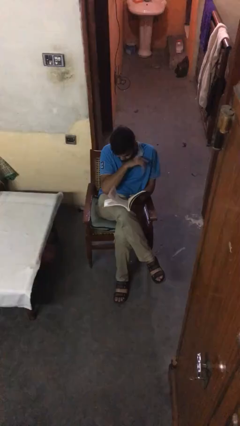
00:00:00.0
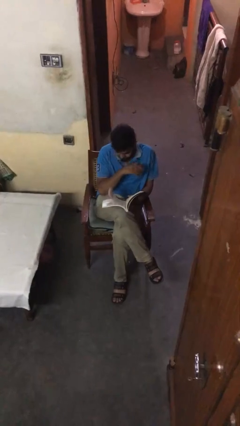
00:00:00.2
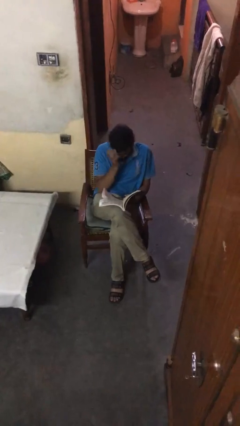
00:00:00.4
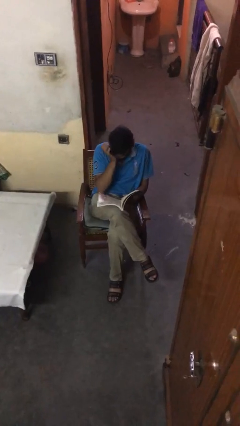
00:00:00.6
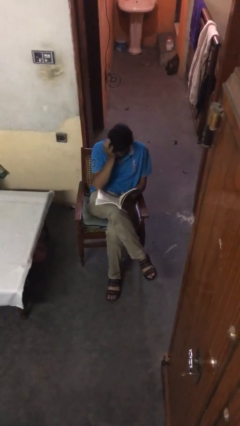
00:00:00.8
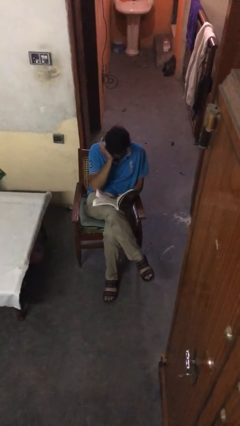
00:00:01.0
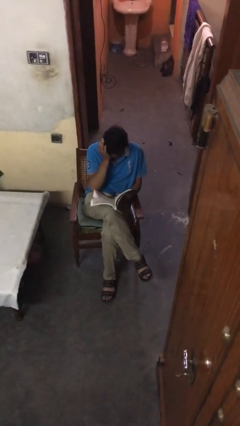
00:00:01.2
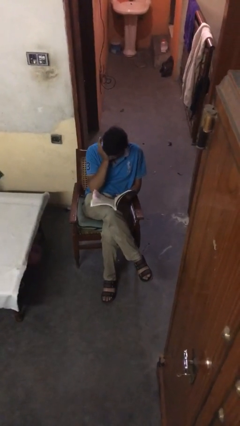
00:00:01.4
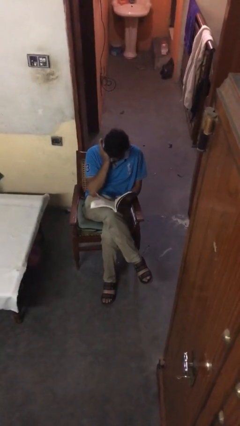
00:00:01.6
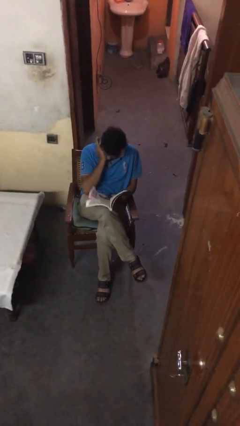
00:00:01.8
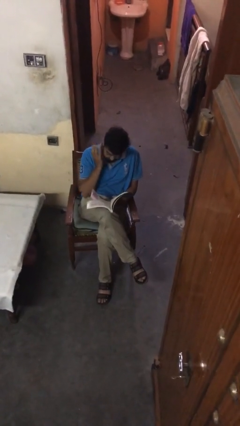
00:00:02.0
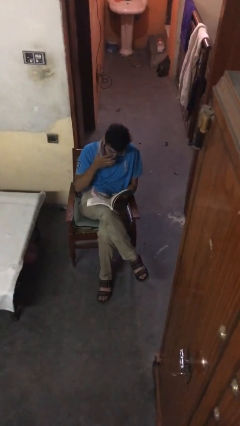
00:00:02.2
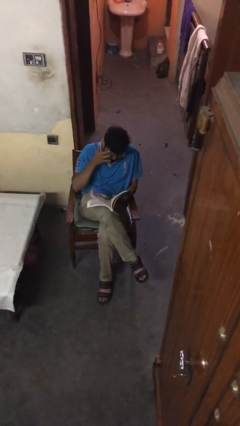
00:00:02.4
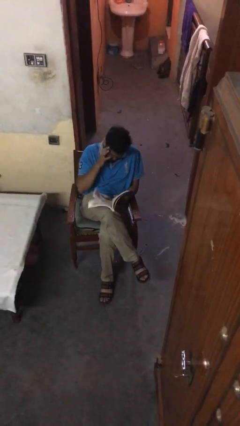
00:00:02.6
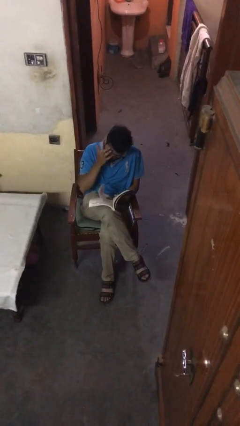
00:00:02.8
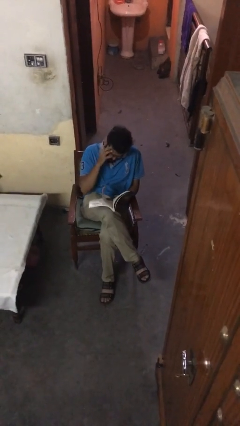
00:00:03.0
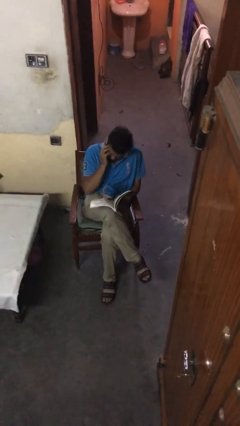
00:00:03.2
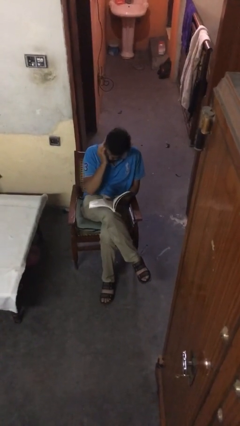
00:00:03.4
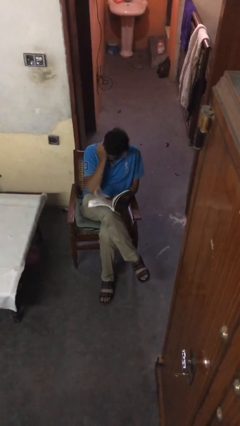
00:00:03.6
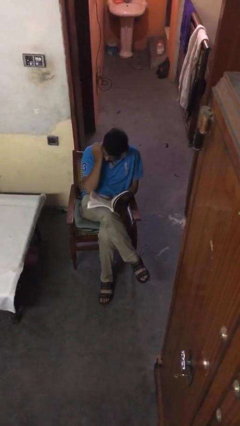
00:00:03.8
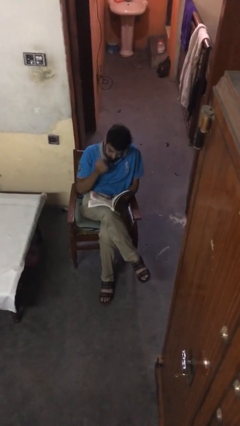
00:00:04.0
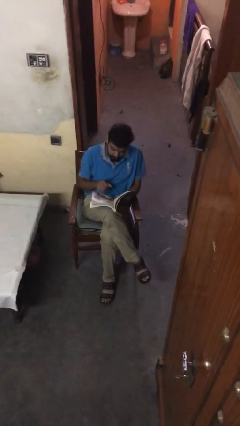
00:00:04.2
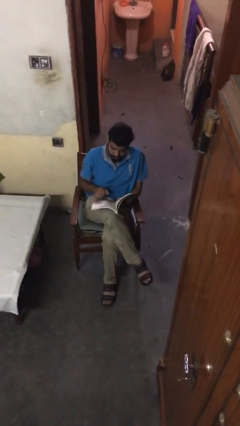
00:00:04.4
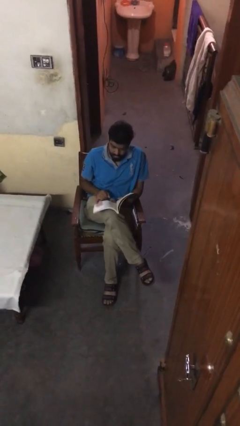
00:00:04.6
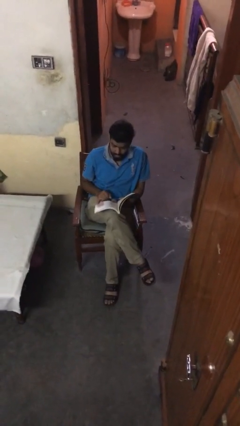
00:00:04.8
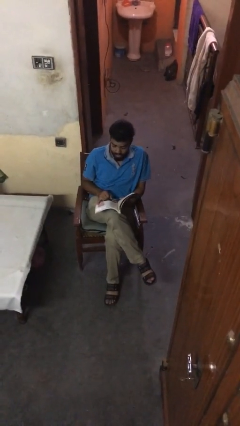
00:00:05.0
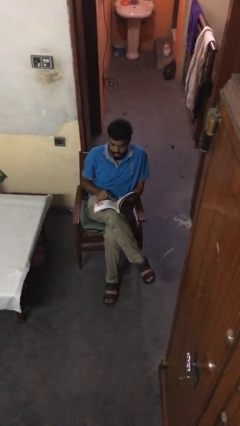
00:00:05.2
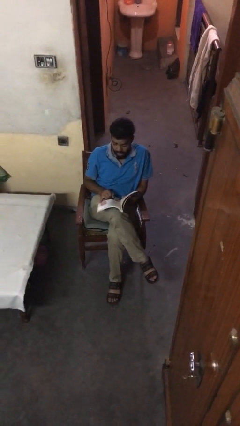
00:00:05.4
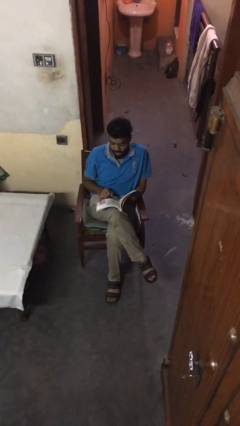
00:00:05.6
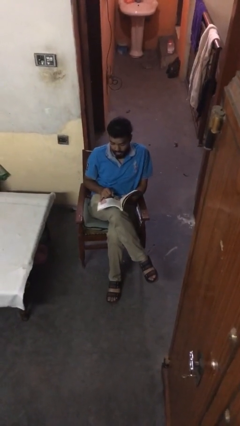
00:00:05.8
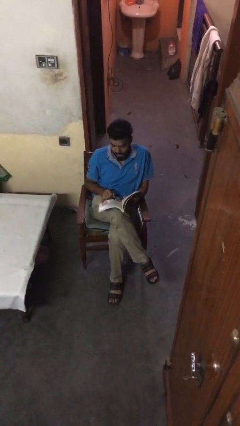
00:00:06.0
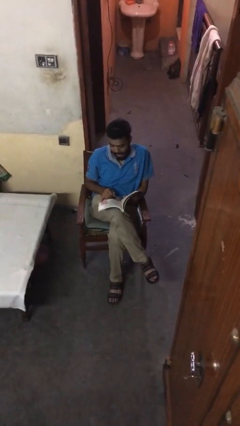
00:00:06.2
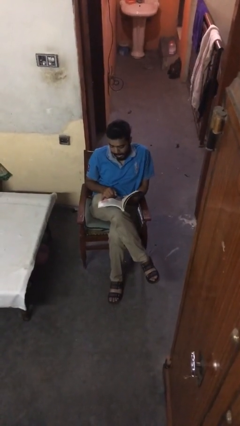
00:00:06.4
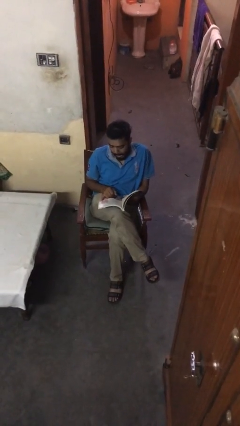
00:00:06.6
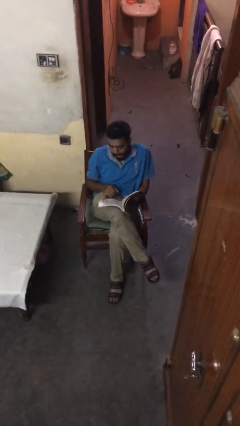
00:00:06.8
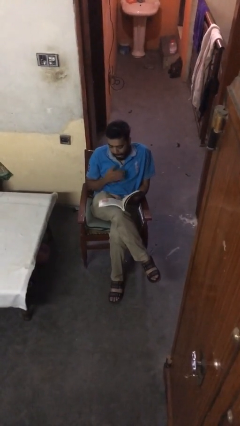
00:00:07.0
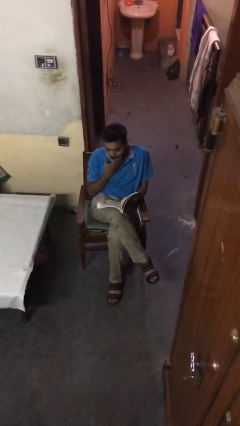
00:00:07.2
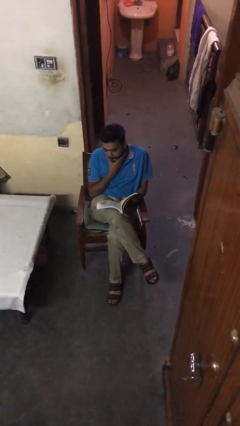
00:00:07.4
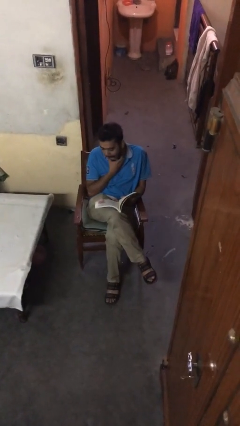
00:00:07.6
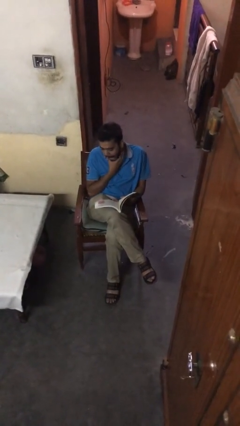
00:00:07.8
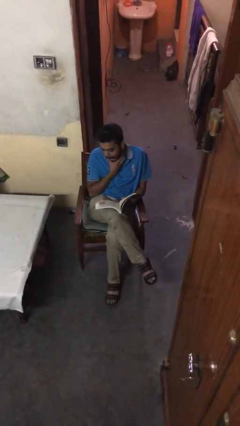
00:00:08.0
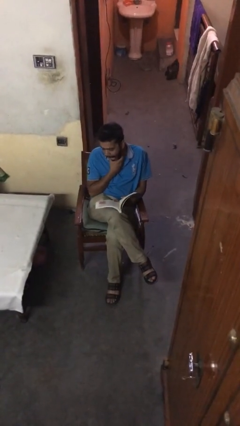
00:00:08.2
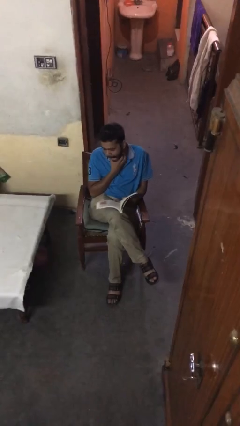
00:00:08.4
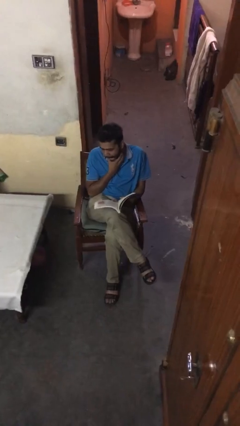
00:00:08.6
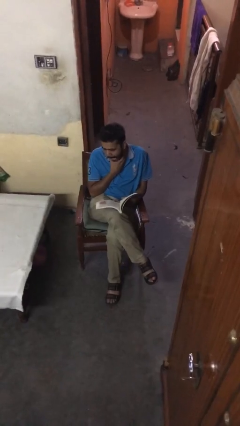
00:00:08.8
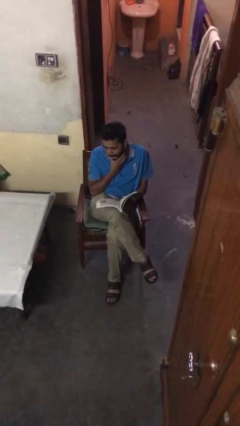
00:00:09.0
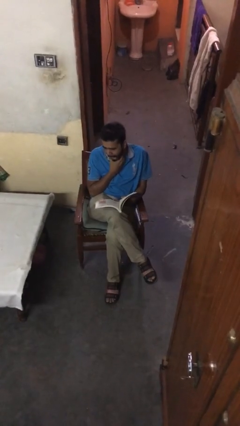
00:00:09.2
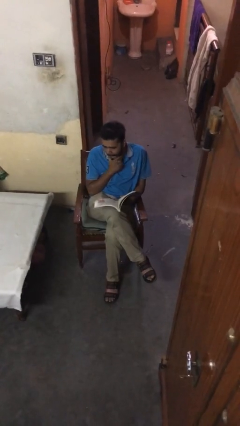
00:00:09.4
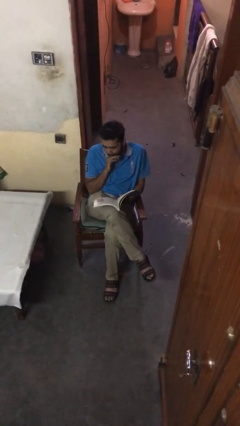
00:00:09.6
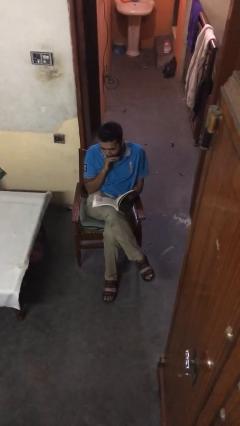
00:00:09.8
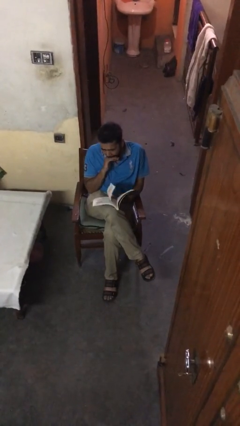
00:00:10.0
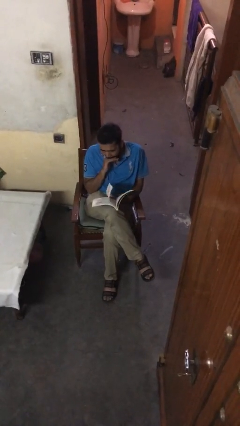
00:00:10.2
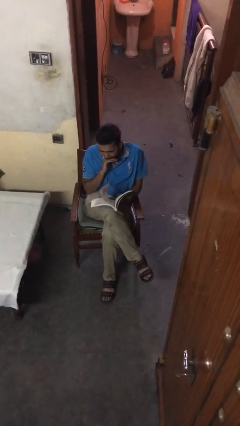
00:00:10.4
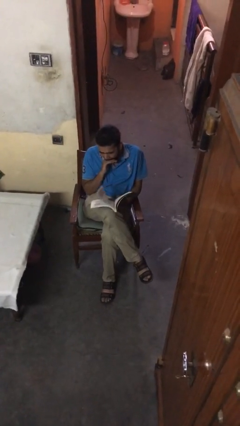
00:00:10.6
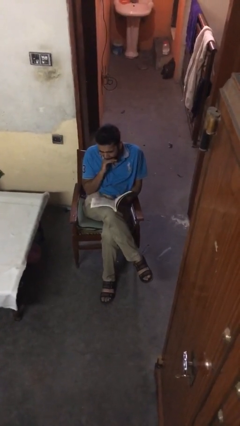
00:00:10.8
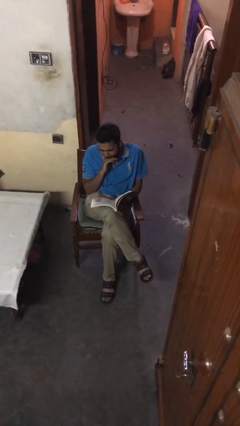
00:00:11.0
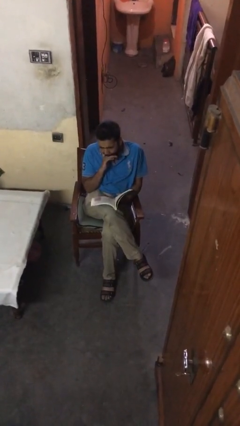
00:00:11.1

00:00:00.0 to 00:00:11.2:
person reads document

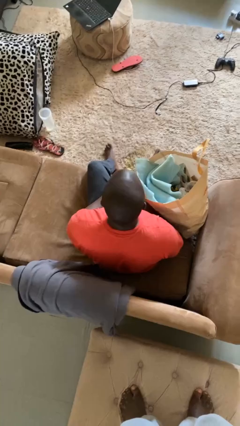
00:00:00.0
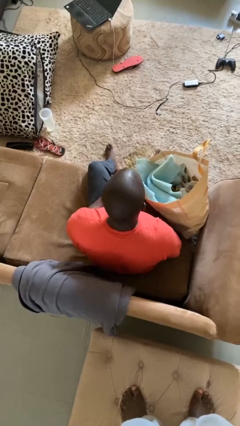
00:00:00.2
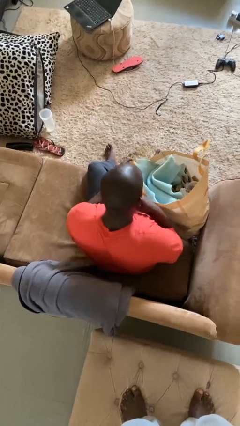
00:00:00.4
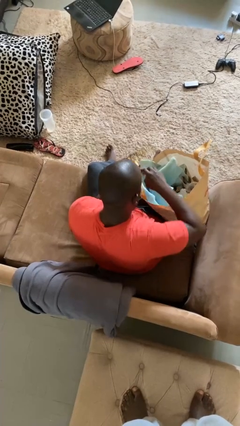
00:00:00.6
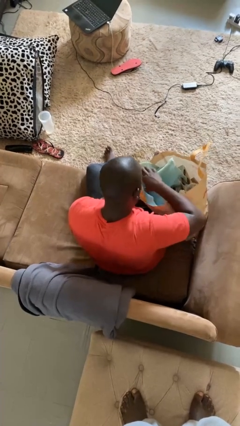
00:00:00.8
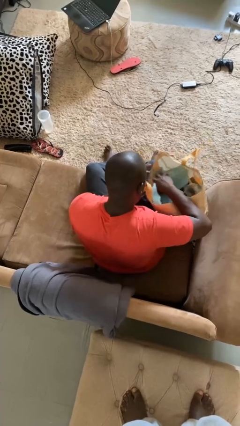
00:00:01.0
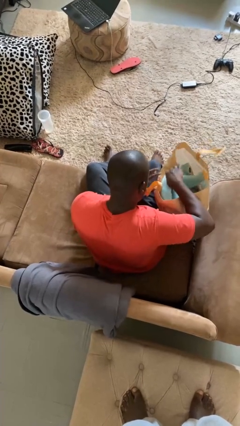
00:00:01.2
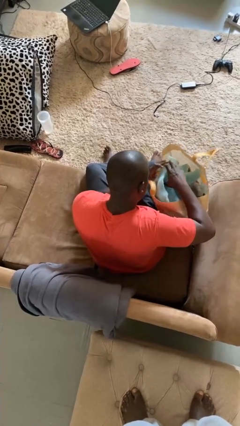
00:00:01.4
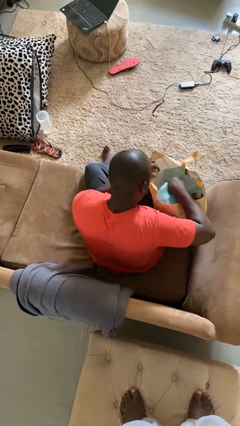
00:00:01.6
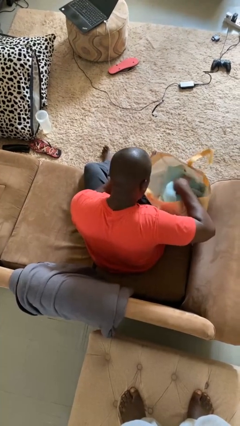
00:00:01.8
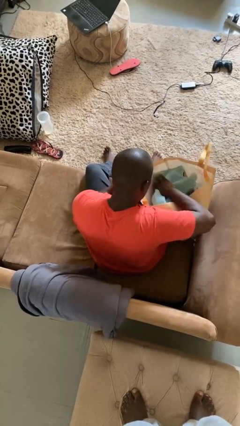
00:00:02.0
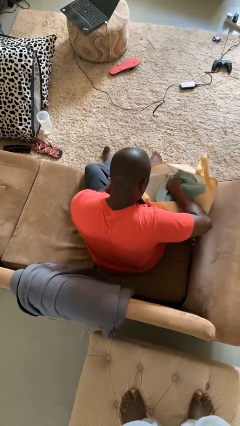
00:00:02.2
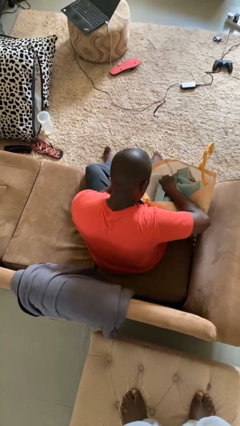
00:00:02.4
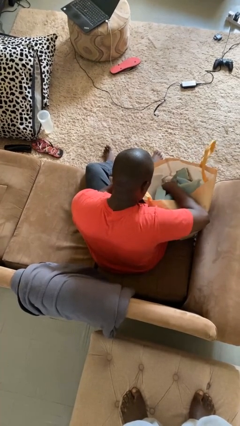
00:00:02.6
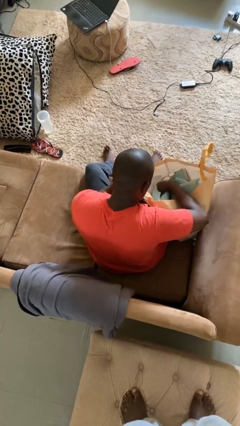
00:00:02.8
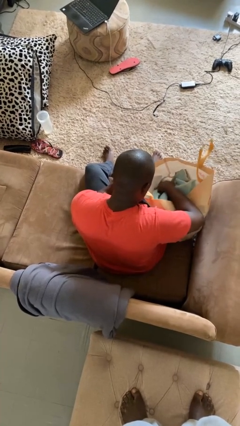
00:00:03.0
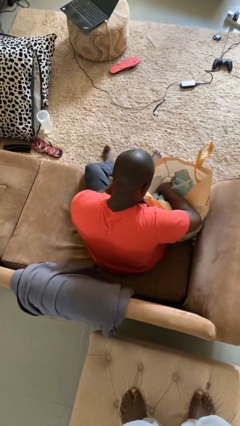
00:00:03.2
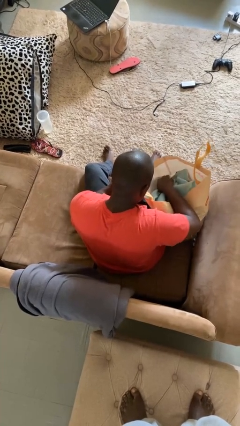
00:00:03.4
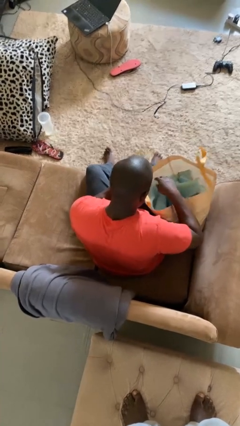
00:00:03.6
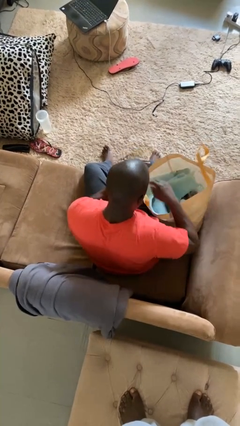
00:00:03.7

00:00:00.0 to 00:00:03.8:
person searches in bag

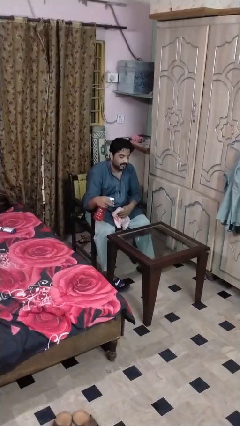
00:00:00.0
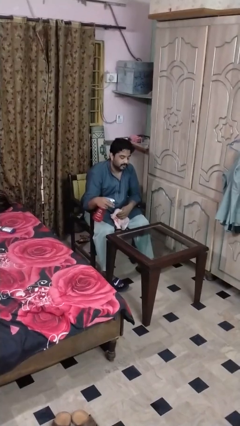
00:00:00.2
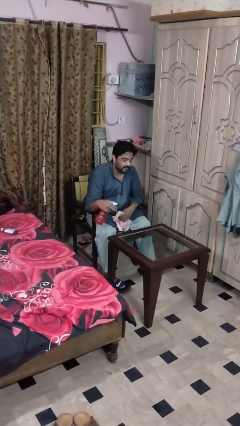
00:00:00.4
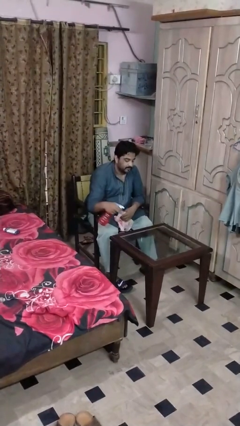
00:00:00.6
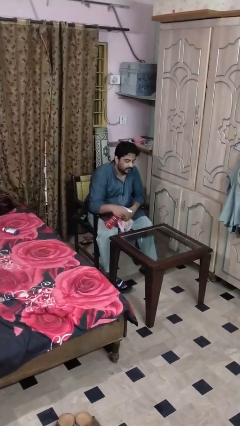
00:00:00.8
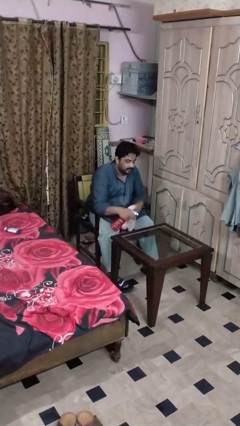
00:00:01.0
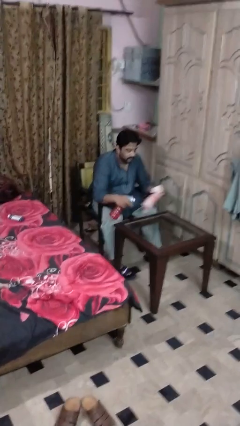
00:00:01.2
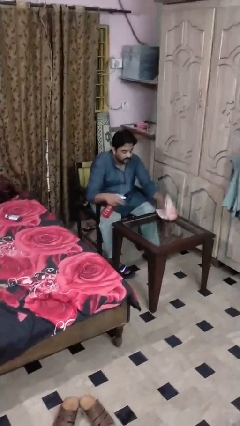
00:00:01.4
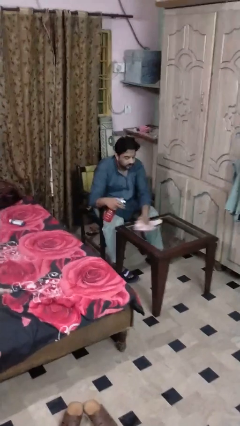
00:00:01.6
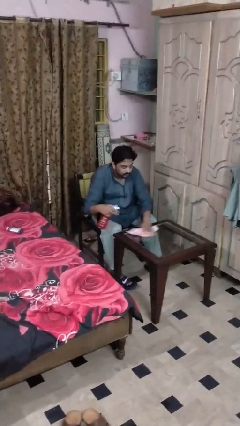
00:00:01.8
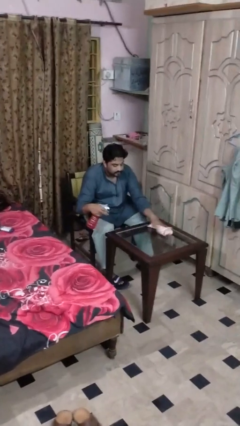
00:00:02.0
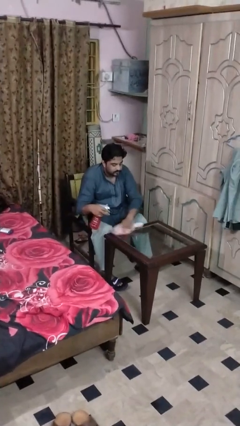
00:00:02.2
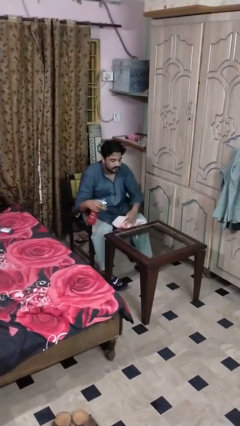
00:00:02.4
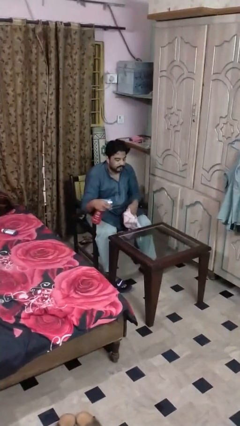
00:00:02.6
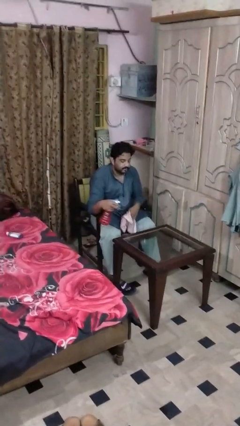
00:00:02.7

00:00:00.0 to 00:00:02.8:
person sprays from bottle
